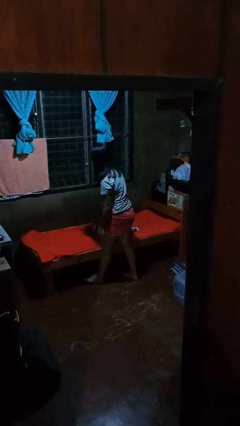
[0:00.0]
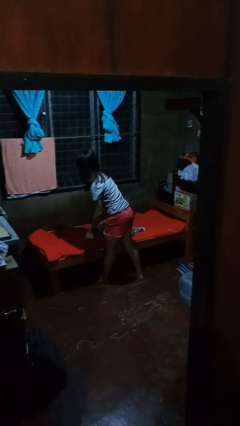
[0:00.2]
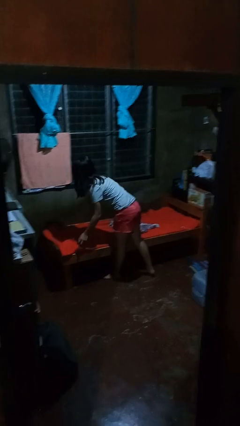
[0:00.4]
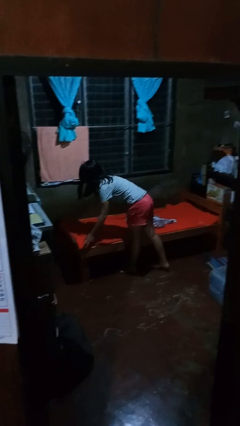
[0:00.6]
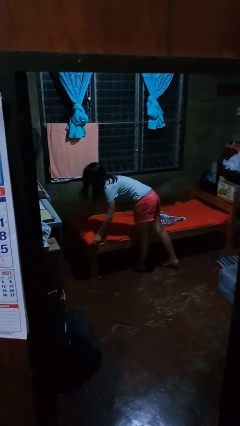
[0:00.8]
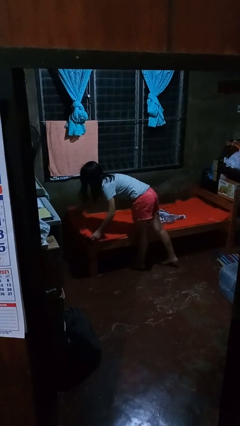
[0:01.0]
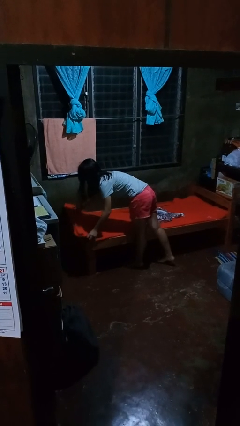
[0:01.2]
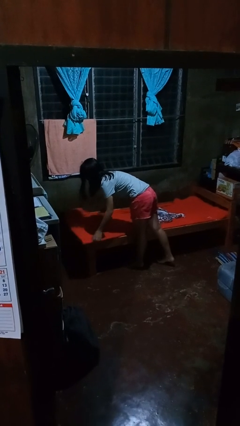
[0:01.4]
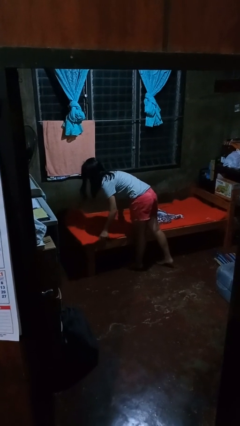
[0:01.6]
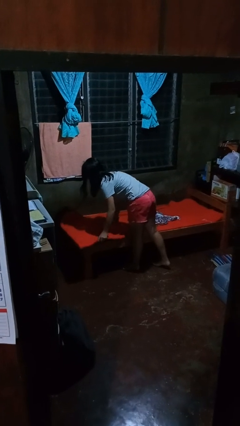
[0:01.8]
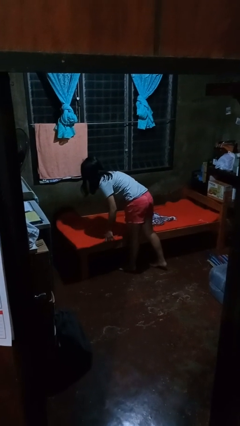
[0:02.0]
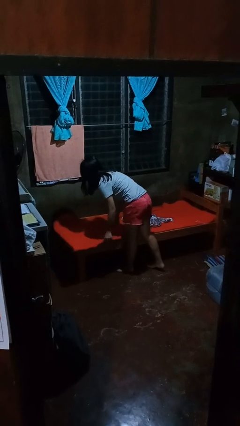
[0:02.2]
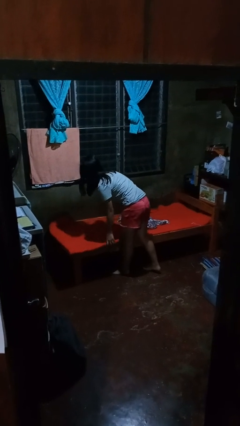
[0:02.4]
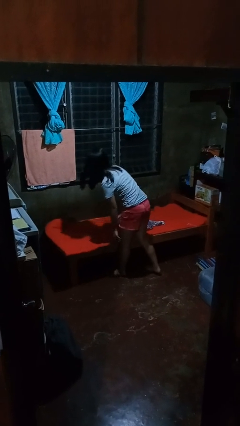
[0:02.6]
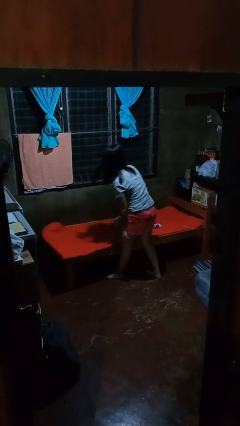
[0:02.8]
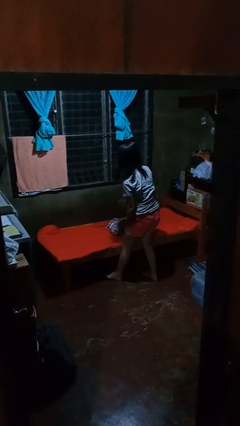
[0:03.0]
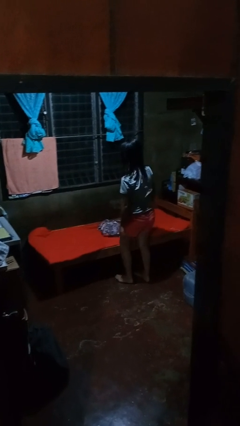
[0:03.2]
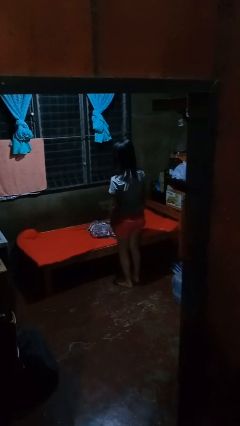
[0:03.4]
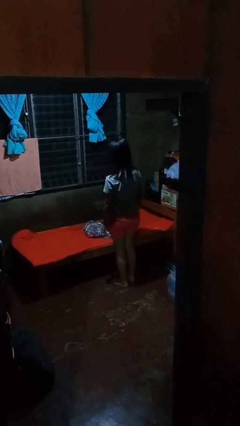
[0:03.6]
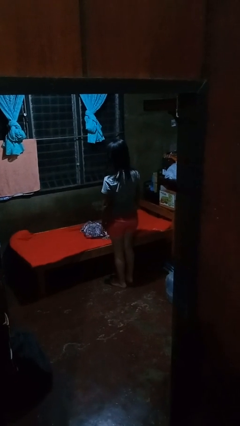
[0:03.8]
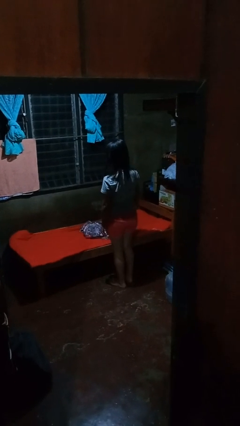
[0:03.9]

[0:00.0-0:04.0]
person makes bed

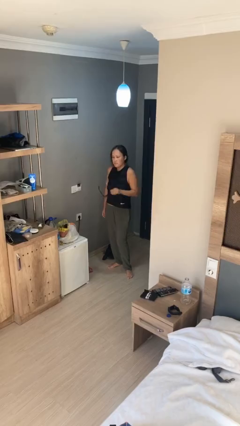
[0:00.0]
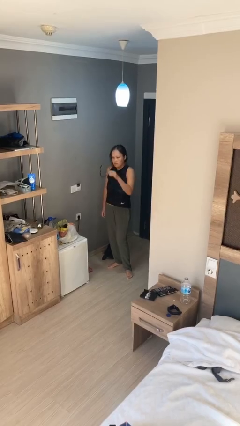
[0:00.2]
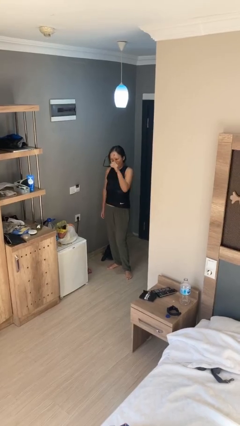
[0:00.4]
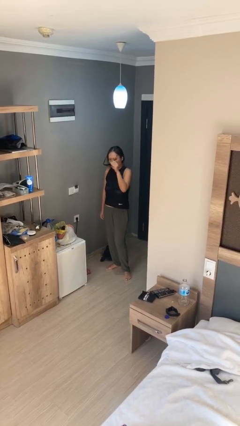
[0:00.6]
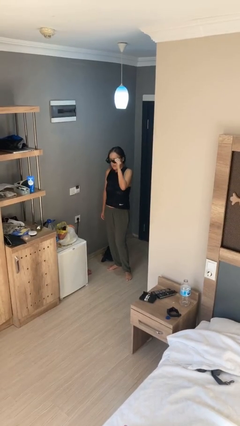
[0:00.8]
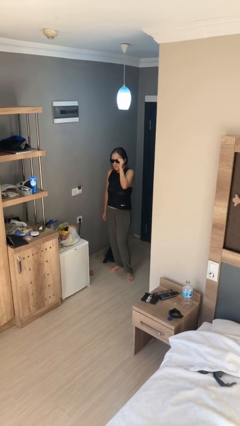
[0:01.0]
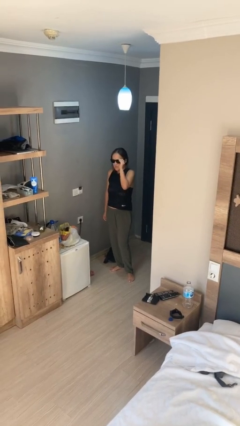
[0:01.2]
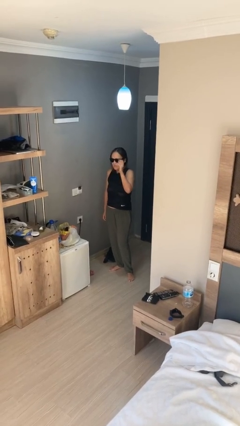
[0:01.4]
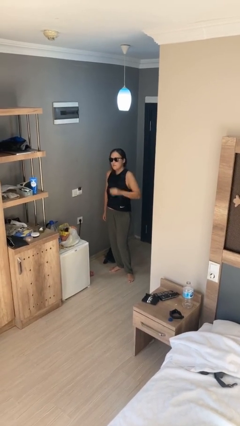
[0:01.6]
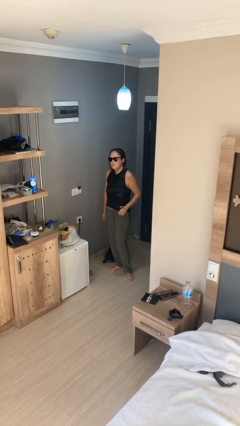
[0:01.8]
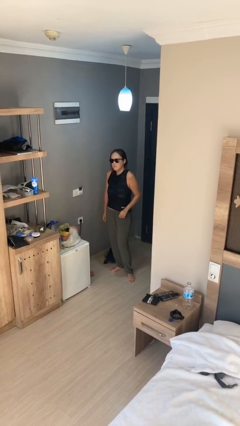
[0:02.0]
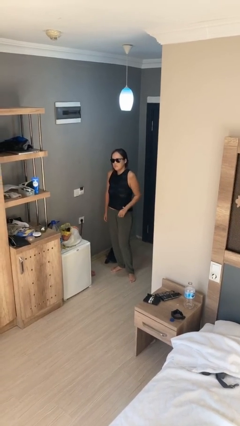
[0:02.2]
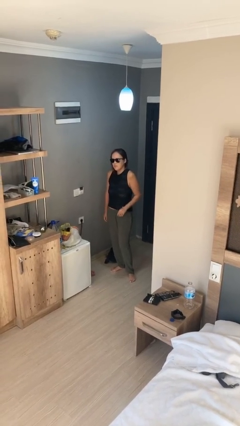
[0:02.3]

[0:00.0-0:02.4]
person puts on sunglasses

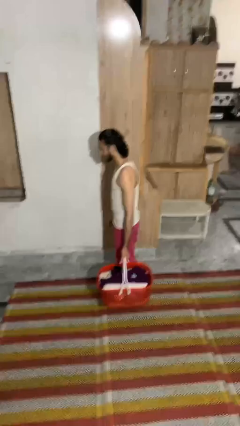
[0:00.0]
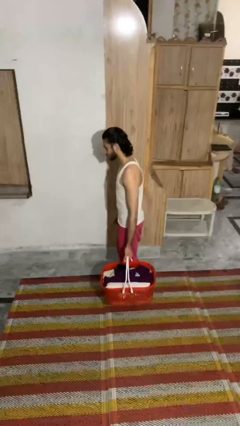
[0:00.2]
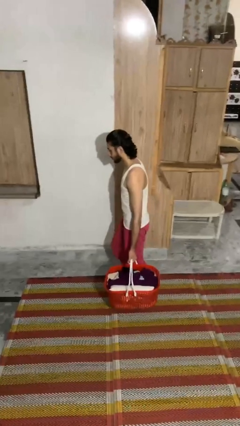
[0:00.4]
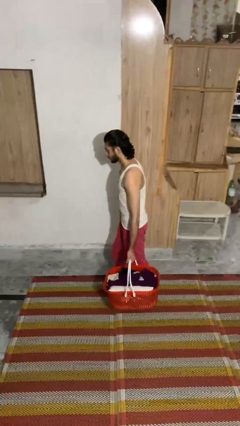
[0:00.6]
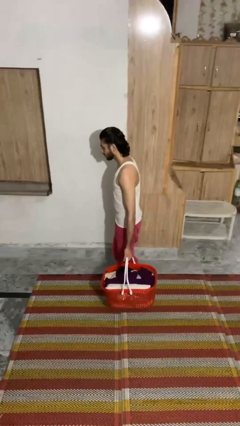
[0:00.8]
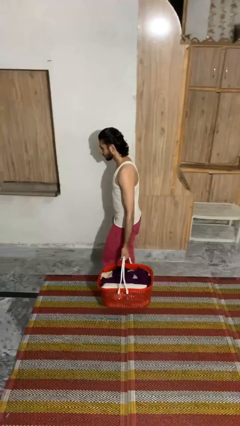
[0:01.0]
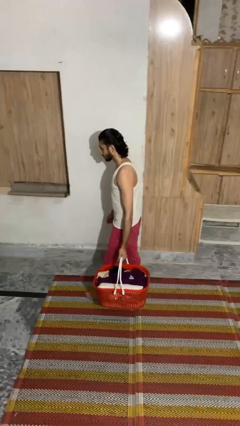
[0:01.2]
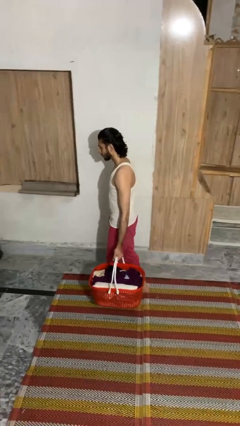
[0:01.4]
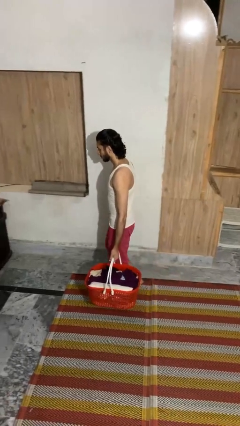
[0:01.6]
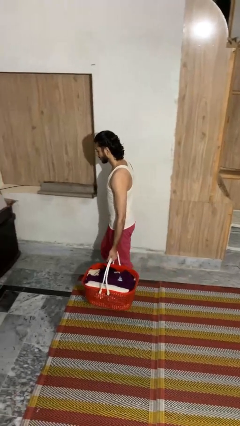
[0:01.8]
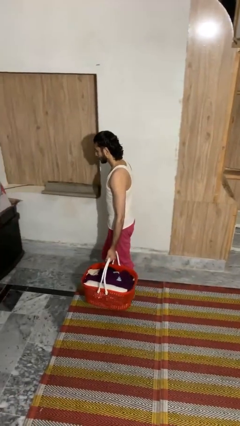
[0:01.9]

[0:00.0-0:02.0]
person carries laundry basket

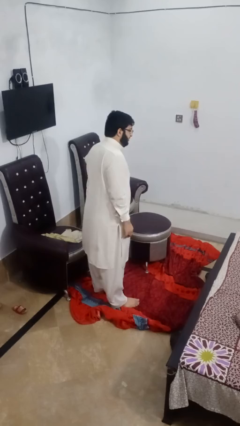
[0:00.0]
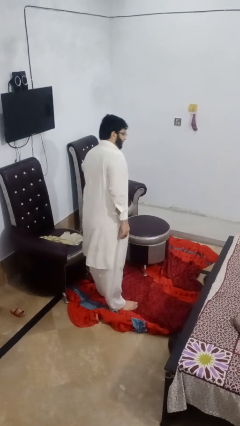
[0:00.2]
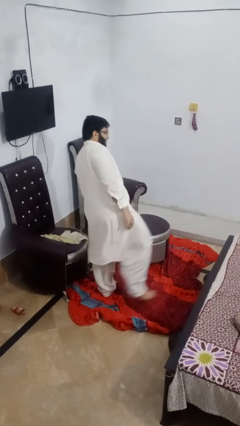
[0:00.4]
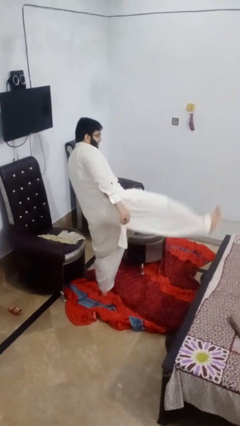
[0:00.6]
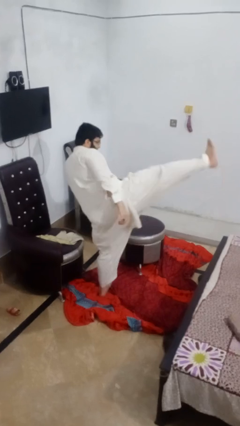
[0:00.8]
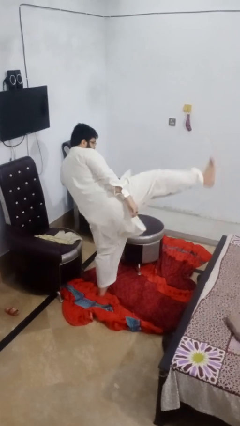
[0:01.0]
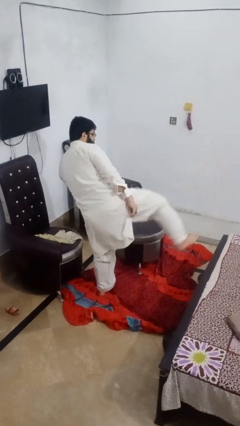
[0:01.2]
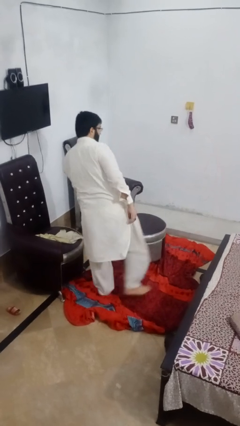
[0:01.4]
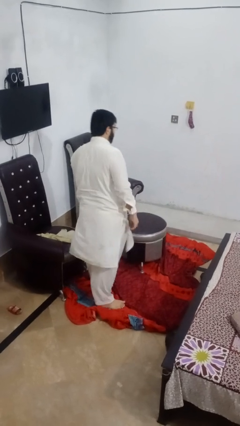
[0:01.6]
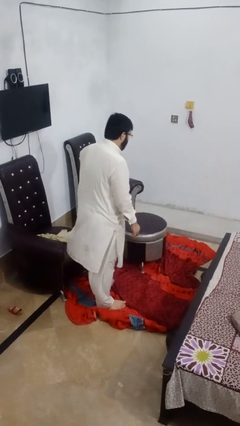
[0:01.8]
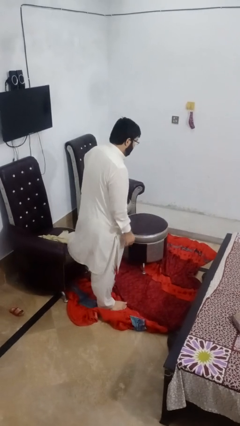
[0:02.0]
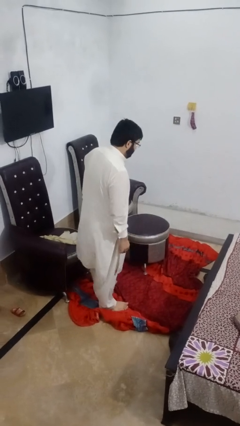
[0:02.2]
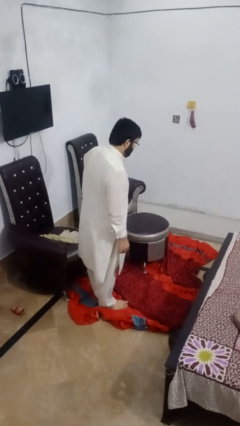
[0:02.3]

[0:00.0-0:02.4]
person karate kicks

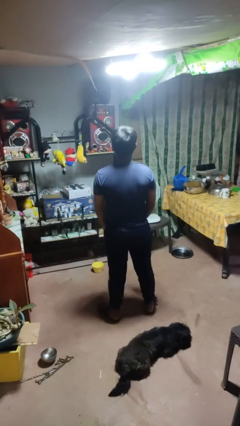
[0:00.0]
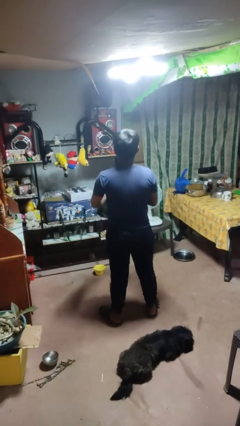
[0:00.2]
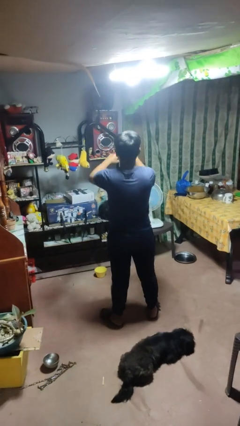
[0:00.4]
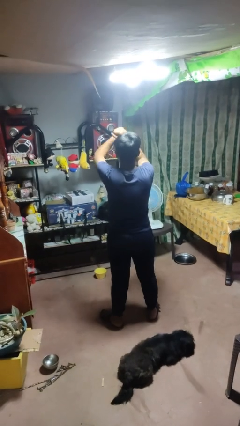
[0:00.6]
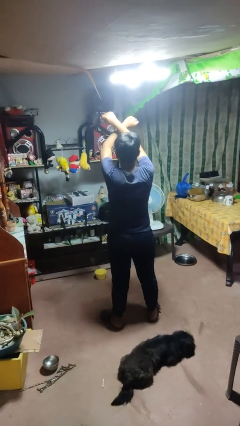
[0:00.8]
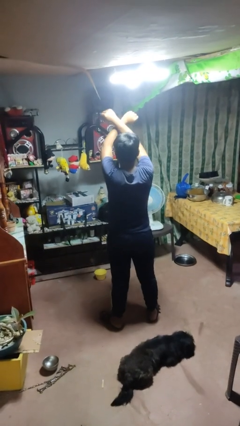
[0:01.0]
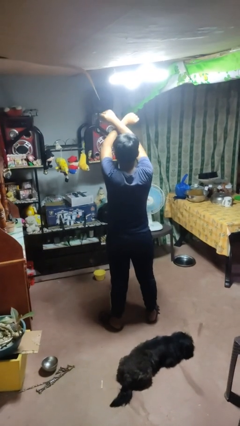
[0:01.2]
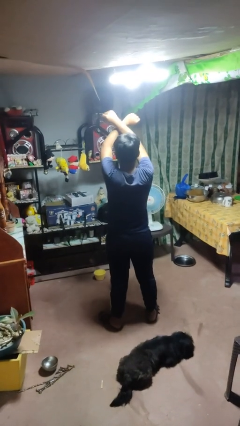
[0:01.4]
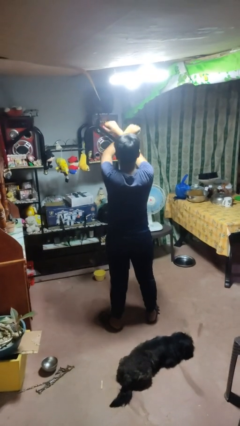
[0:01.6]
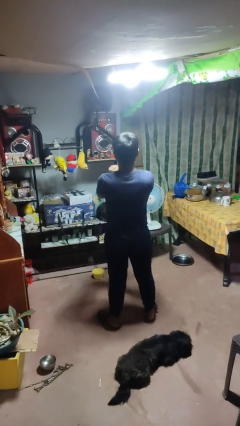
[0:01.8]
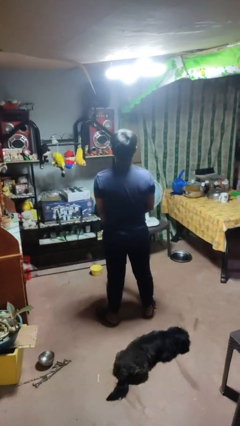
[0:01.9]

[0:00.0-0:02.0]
person gestures arms x

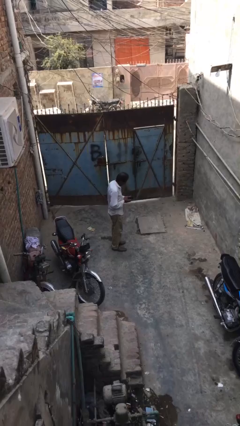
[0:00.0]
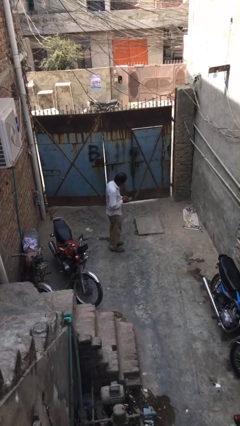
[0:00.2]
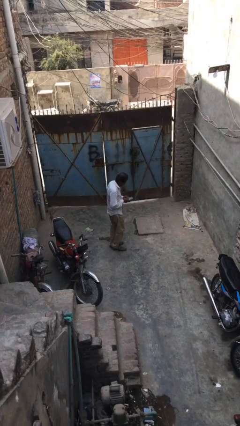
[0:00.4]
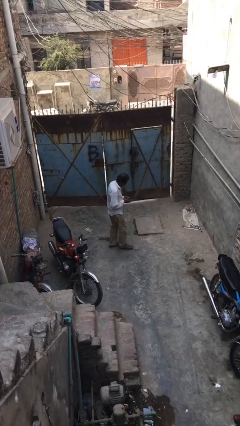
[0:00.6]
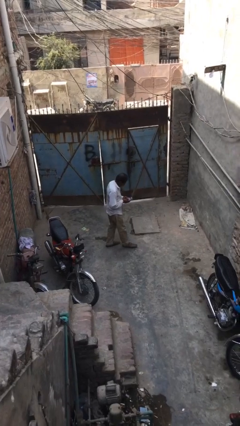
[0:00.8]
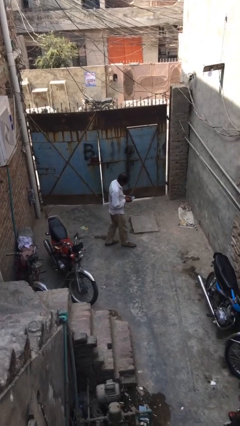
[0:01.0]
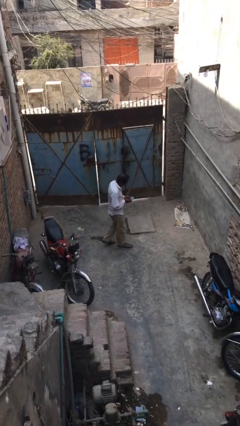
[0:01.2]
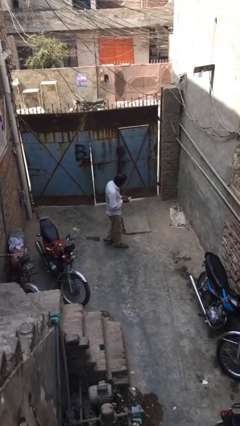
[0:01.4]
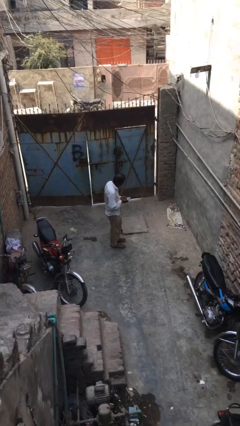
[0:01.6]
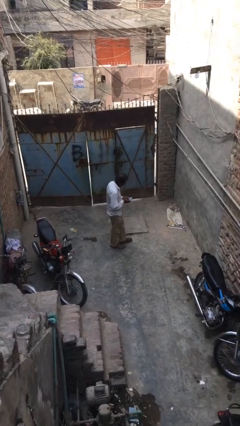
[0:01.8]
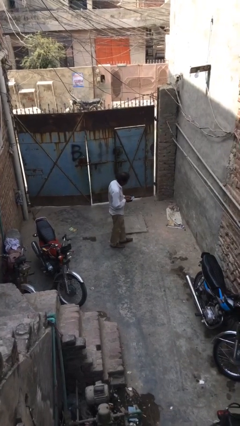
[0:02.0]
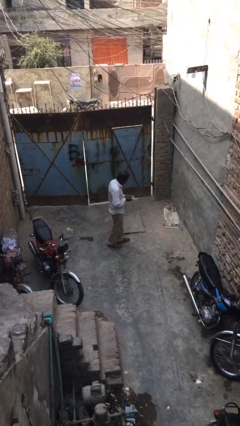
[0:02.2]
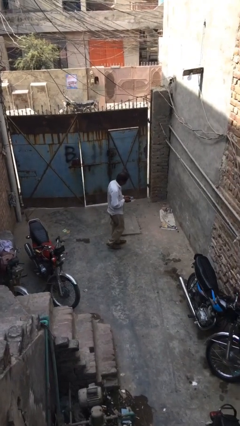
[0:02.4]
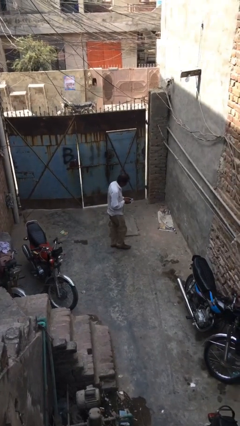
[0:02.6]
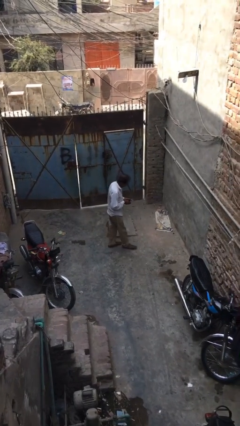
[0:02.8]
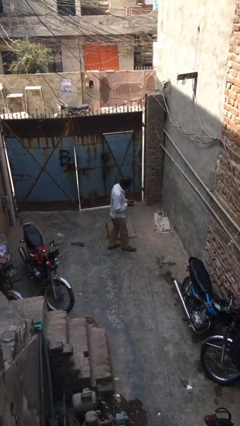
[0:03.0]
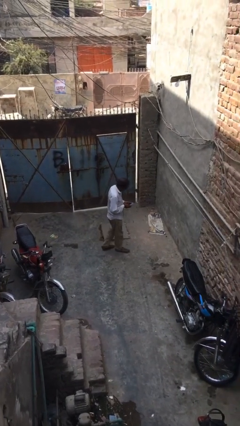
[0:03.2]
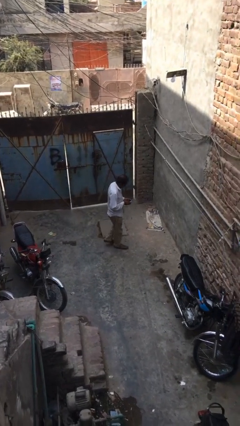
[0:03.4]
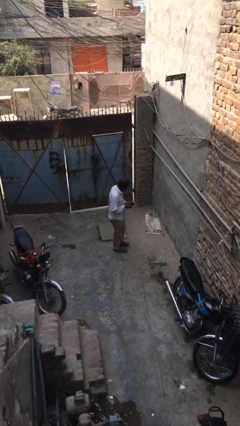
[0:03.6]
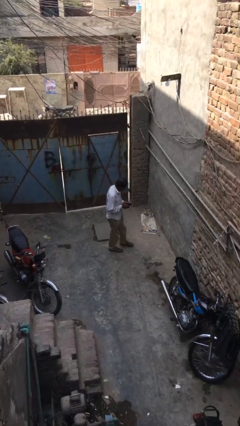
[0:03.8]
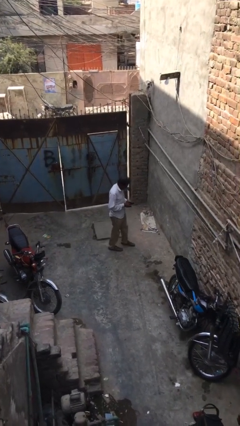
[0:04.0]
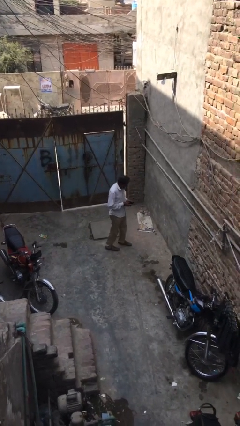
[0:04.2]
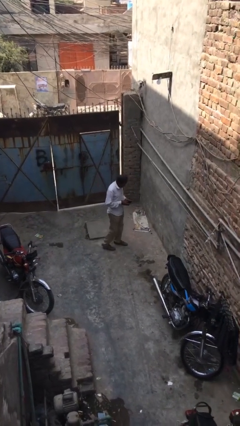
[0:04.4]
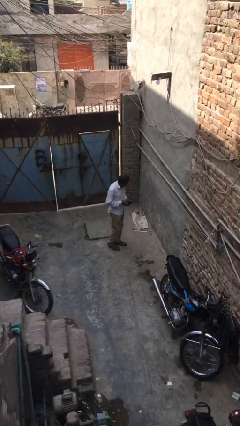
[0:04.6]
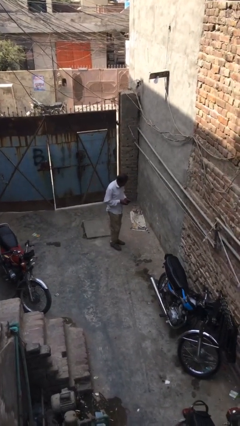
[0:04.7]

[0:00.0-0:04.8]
person texts on phone
